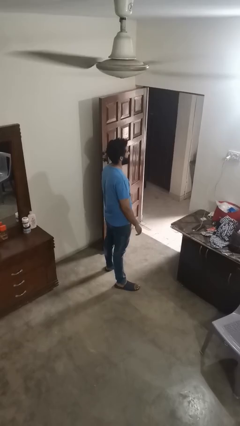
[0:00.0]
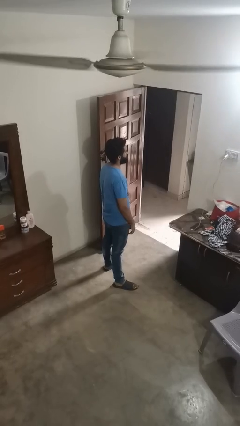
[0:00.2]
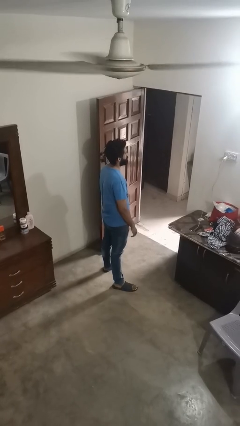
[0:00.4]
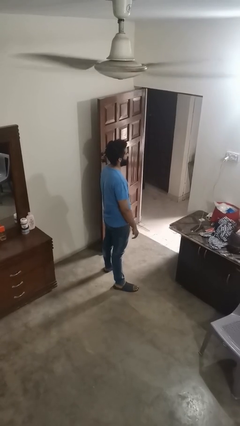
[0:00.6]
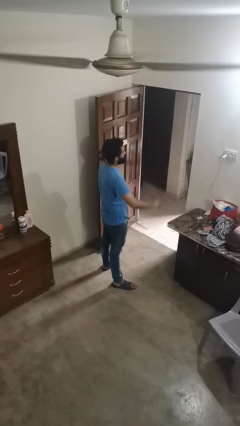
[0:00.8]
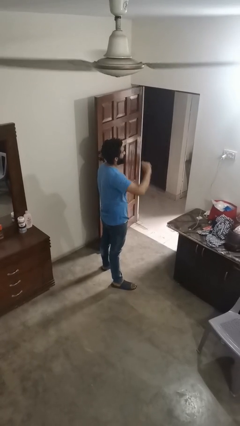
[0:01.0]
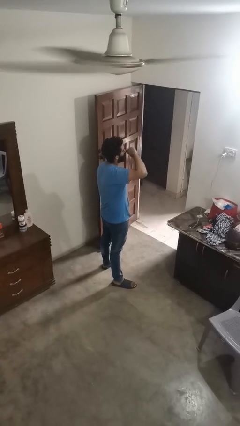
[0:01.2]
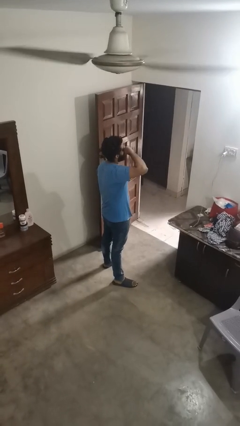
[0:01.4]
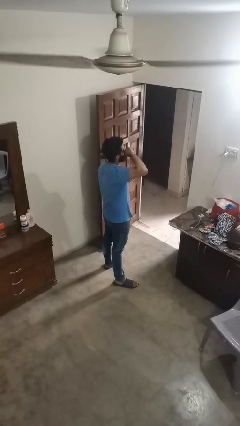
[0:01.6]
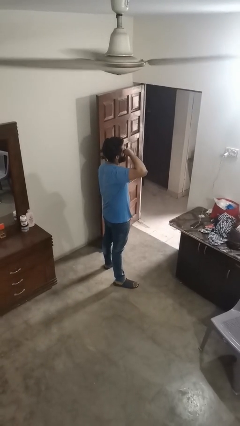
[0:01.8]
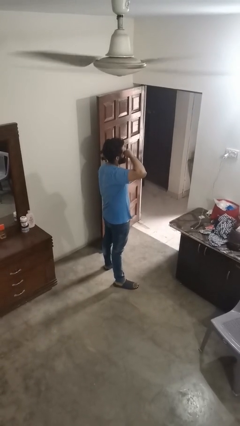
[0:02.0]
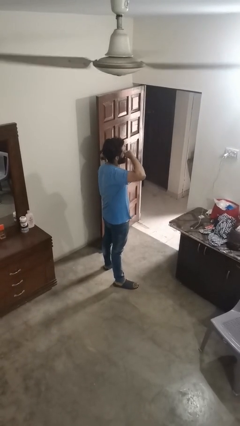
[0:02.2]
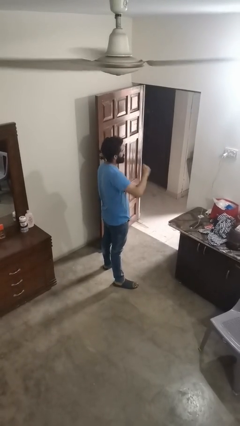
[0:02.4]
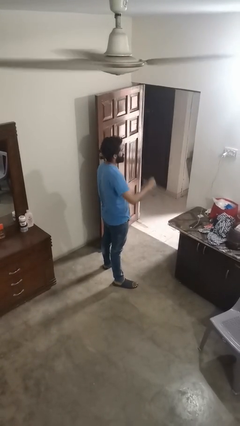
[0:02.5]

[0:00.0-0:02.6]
person rubs eyes

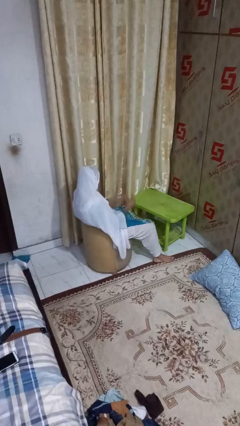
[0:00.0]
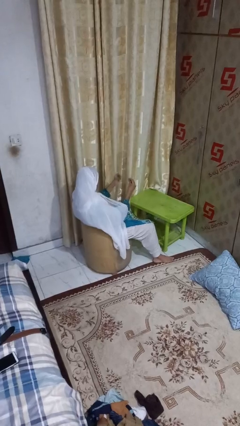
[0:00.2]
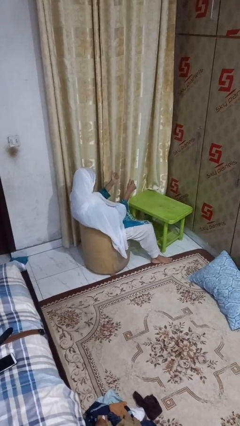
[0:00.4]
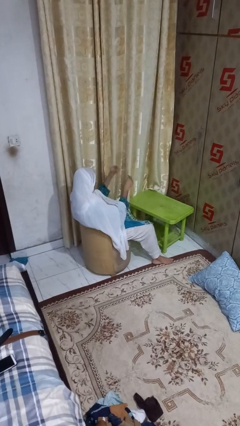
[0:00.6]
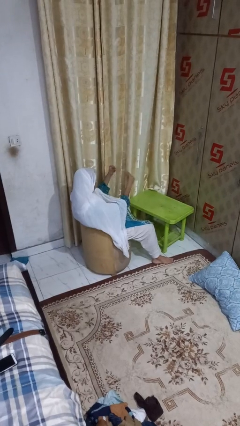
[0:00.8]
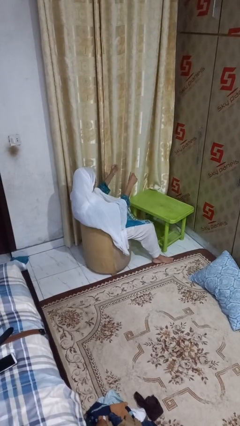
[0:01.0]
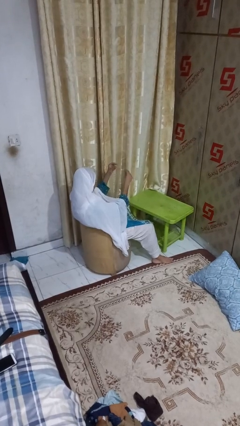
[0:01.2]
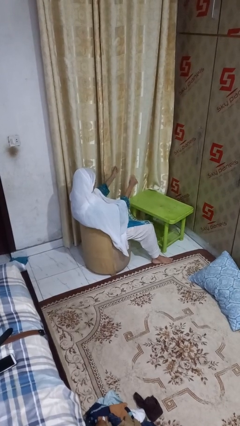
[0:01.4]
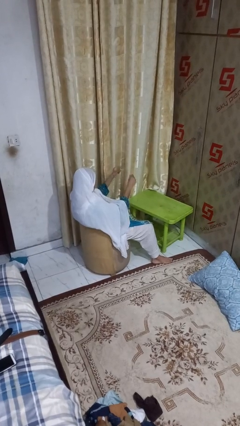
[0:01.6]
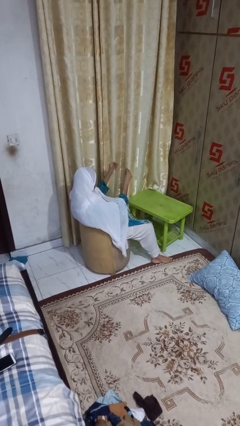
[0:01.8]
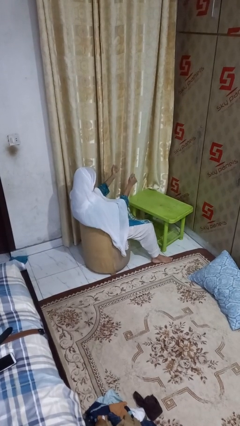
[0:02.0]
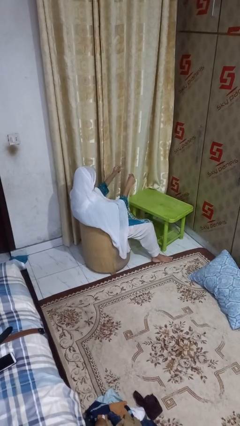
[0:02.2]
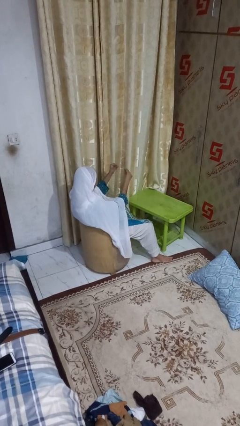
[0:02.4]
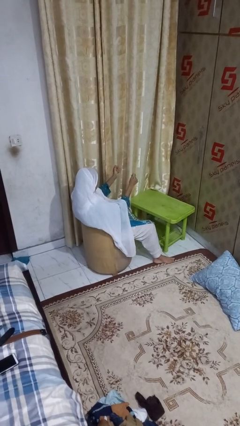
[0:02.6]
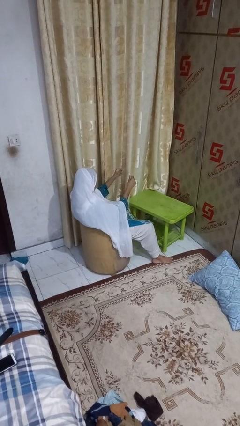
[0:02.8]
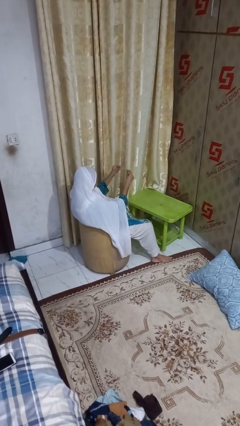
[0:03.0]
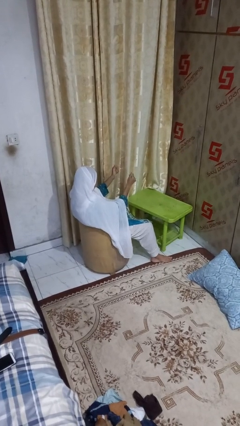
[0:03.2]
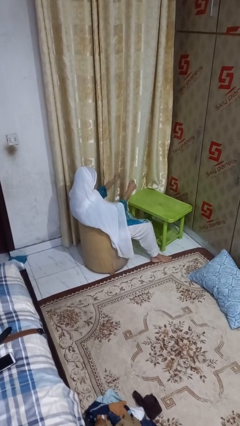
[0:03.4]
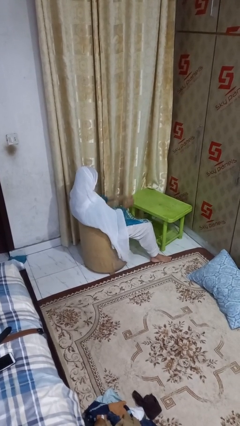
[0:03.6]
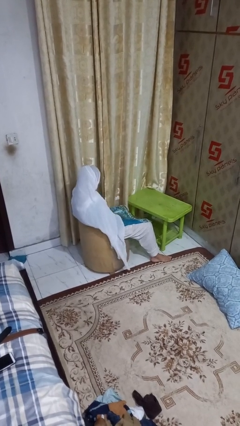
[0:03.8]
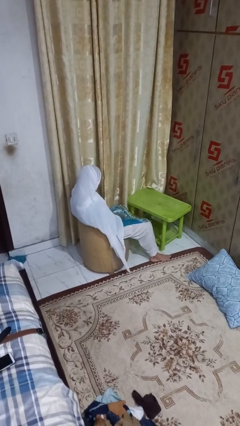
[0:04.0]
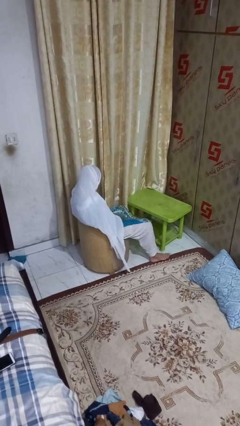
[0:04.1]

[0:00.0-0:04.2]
person snaps fingers

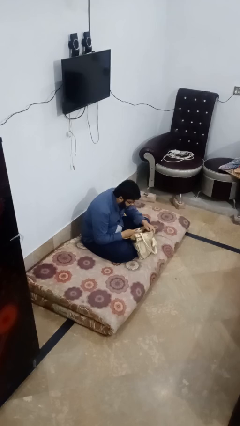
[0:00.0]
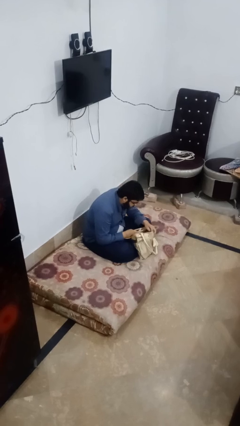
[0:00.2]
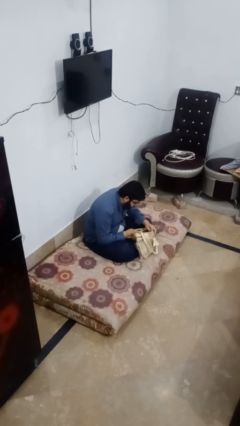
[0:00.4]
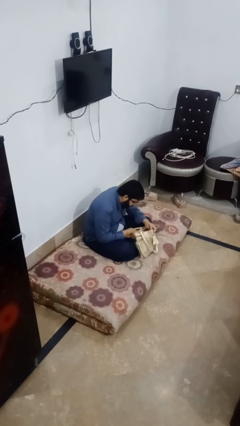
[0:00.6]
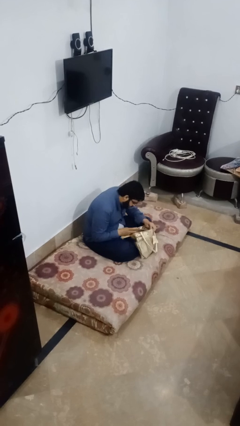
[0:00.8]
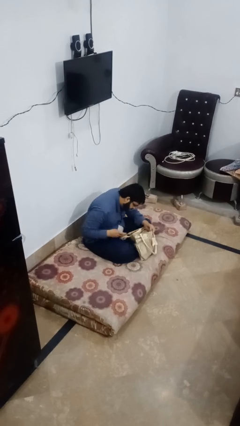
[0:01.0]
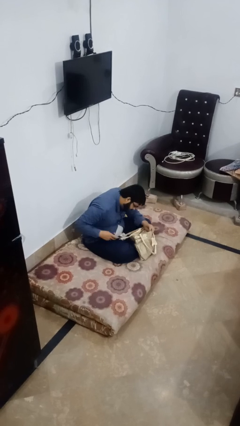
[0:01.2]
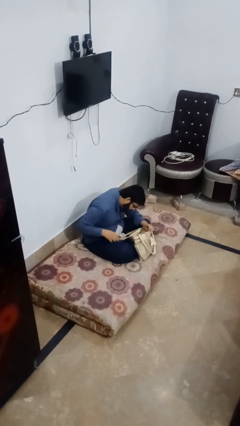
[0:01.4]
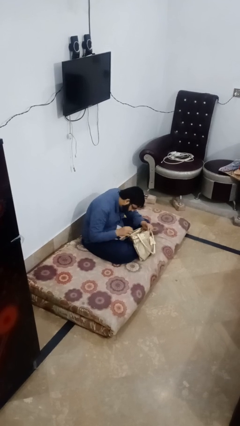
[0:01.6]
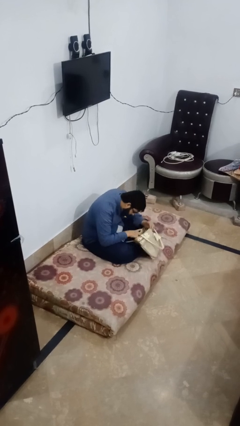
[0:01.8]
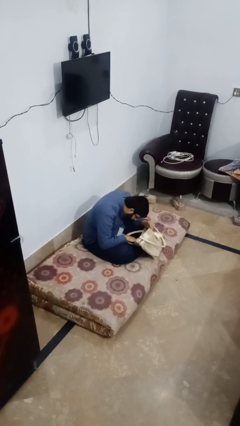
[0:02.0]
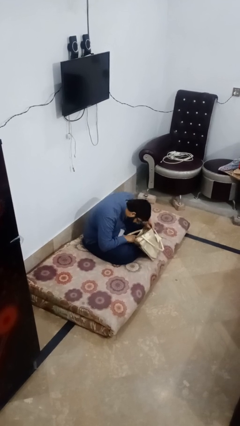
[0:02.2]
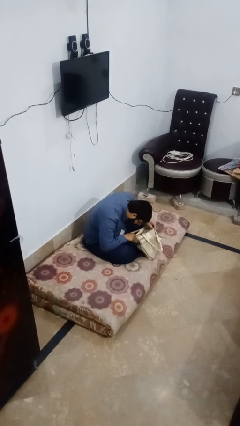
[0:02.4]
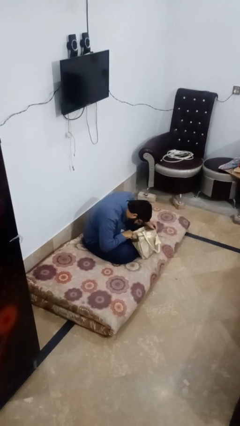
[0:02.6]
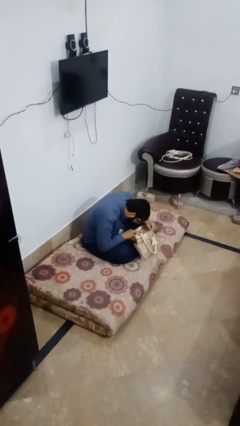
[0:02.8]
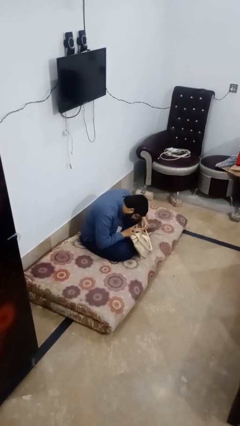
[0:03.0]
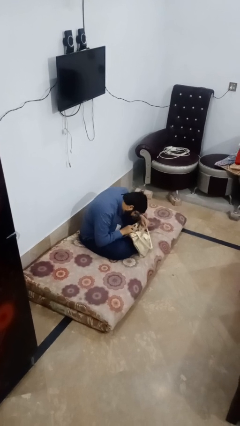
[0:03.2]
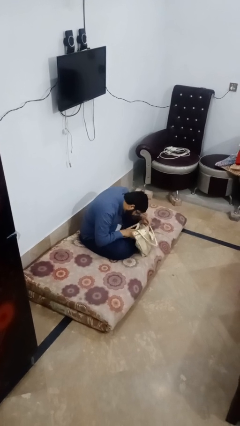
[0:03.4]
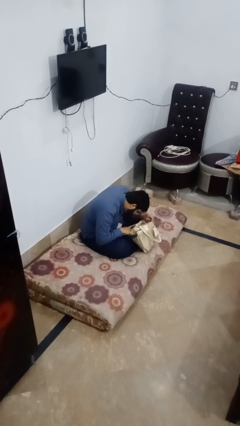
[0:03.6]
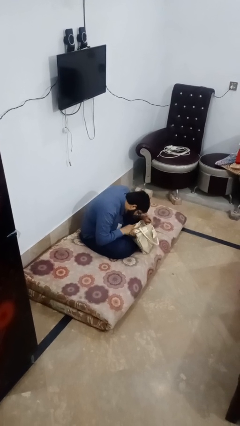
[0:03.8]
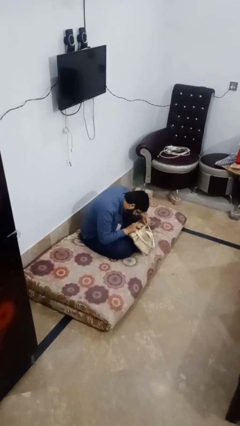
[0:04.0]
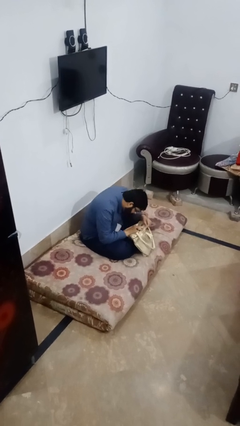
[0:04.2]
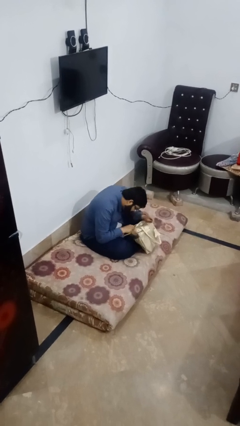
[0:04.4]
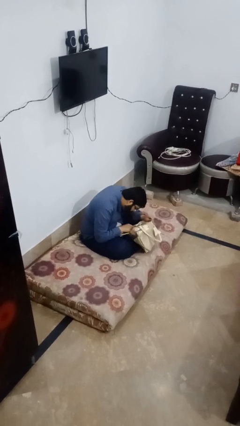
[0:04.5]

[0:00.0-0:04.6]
person searches in bag

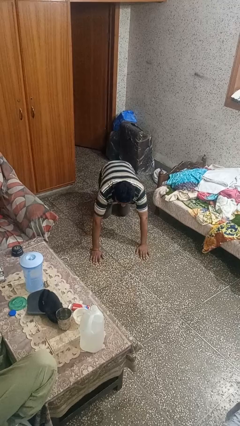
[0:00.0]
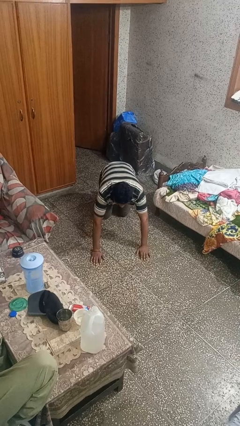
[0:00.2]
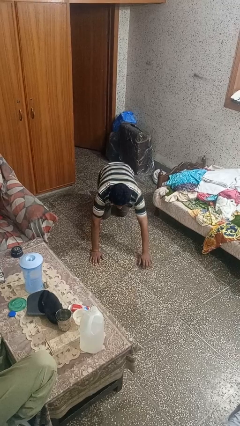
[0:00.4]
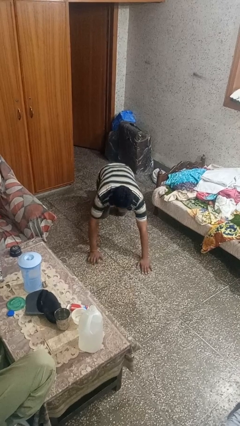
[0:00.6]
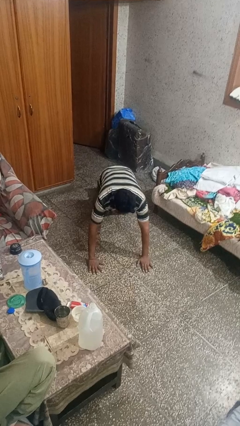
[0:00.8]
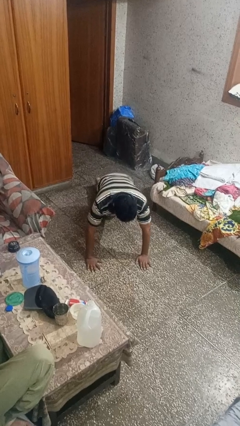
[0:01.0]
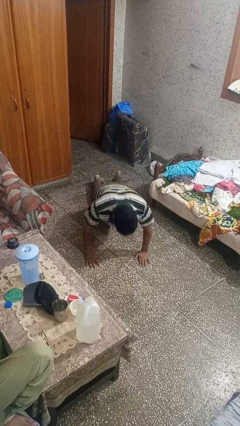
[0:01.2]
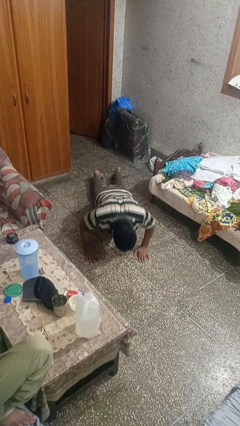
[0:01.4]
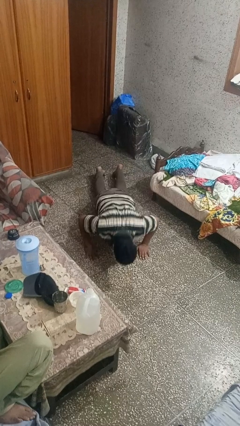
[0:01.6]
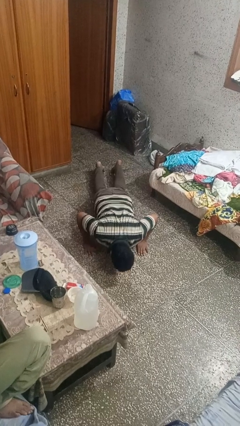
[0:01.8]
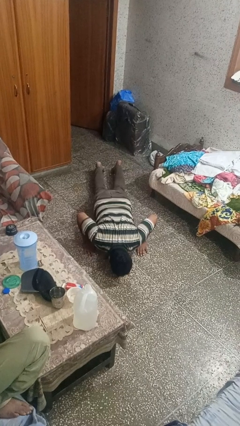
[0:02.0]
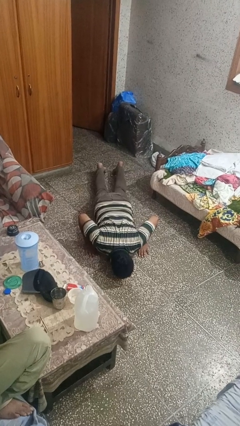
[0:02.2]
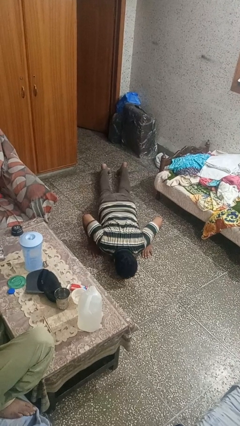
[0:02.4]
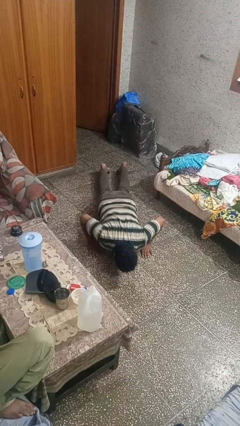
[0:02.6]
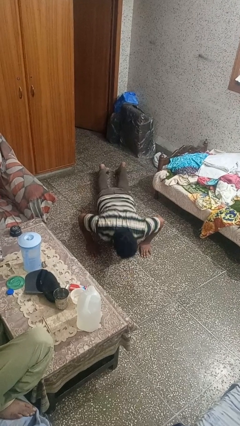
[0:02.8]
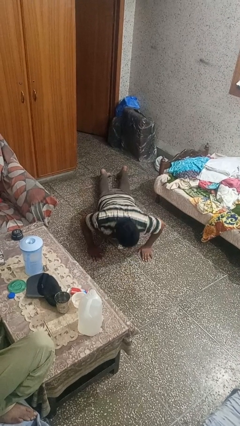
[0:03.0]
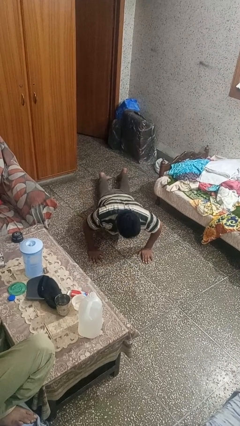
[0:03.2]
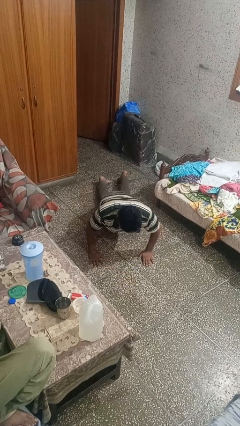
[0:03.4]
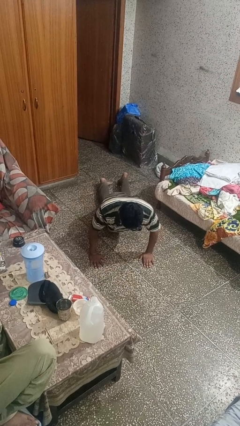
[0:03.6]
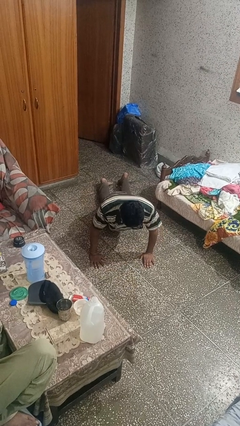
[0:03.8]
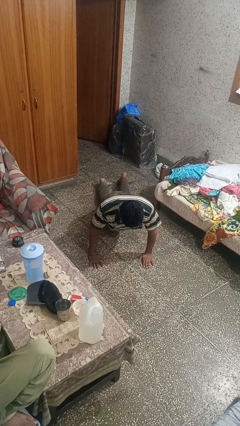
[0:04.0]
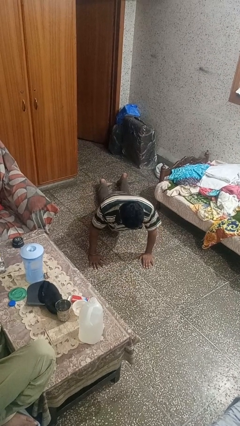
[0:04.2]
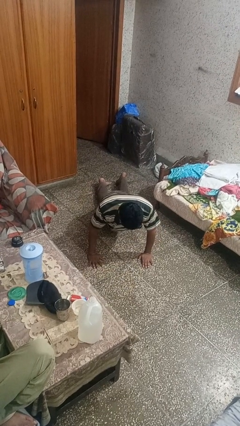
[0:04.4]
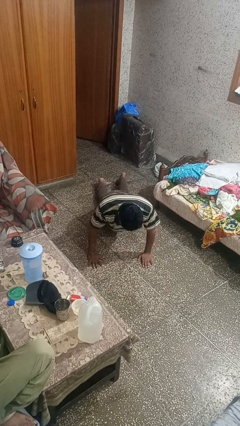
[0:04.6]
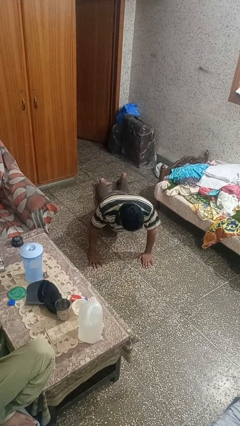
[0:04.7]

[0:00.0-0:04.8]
person exercises with pushup

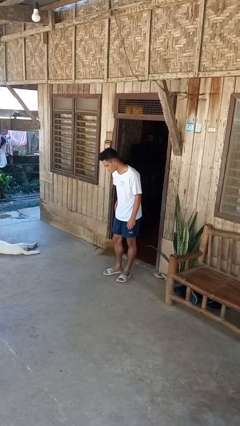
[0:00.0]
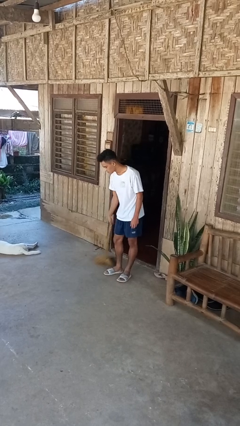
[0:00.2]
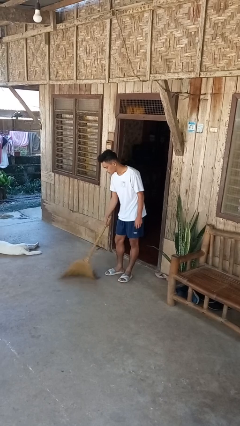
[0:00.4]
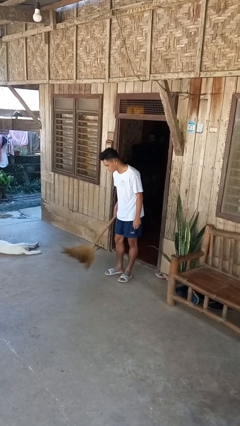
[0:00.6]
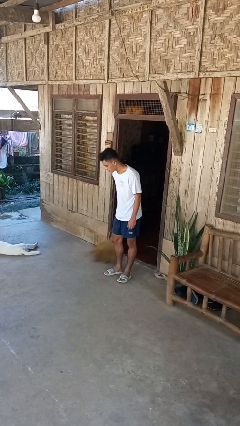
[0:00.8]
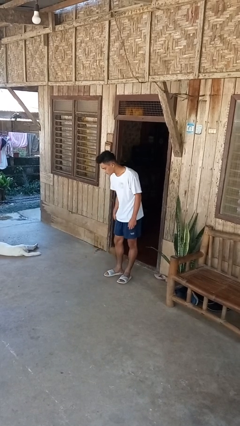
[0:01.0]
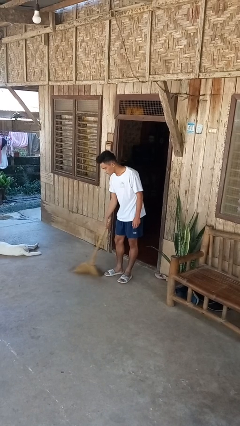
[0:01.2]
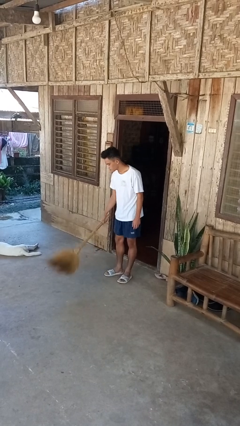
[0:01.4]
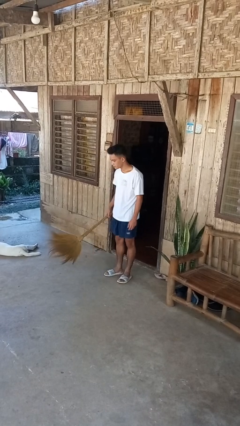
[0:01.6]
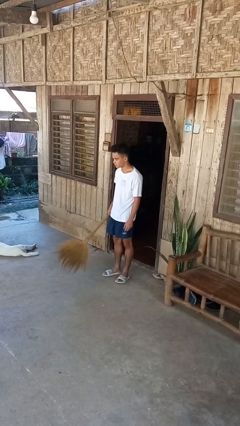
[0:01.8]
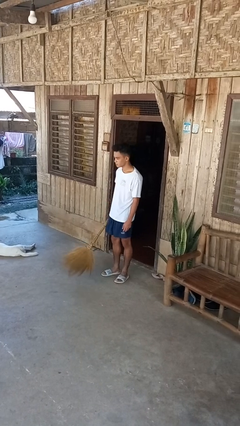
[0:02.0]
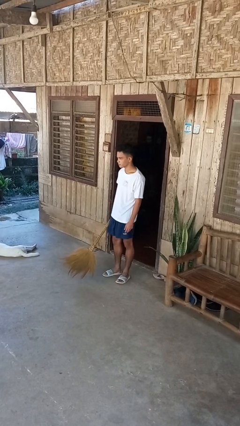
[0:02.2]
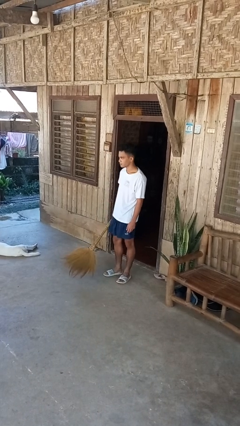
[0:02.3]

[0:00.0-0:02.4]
person sweeps floor
